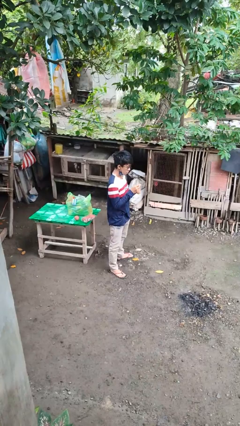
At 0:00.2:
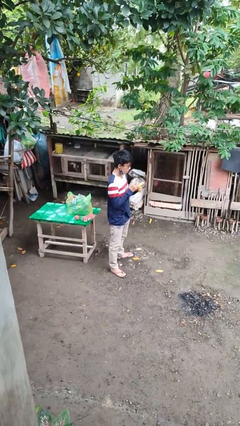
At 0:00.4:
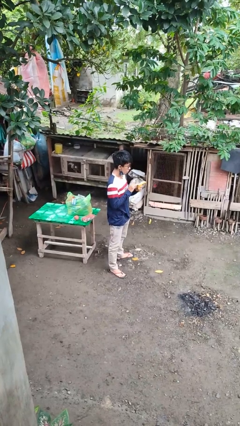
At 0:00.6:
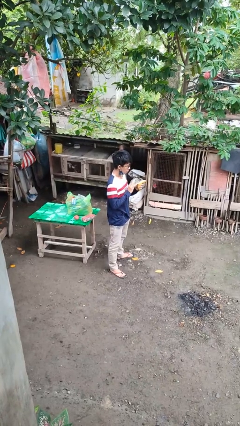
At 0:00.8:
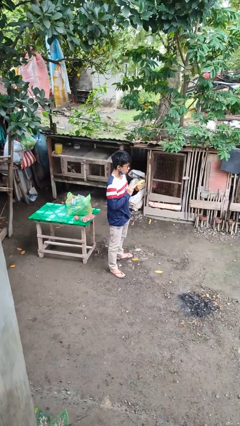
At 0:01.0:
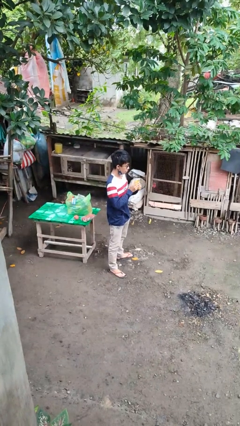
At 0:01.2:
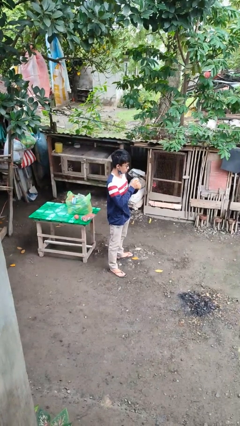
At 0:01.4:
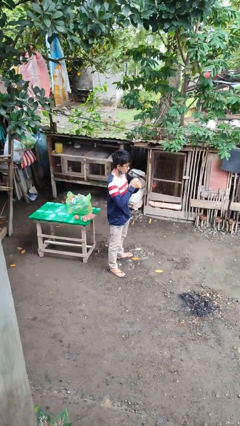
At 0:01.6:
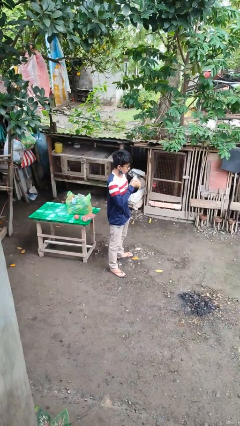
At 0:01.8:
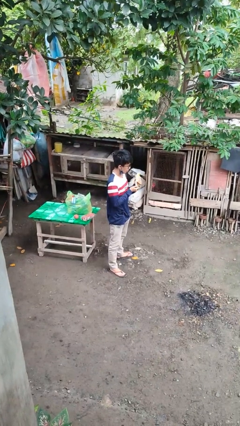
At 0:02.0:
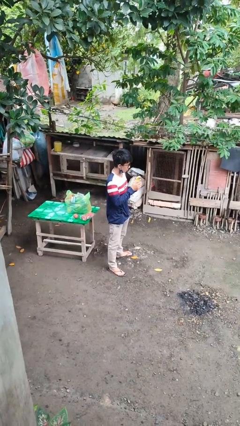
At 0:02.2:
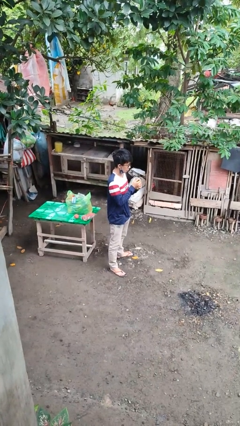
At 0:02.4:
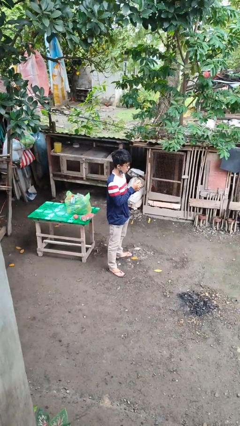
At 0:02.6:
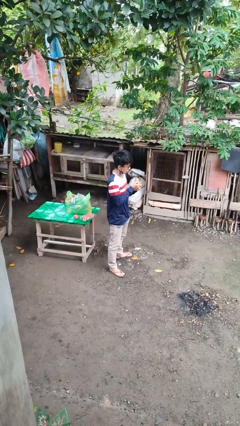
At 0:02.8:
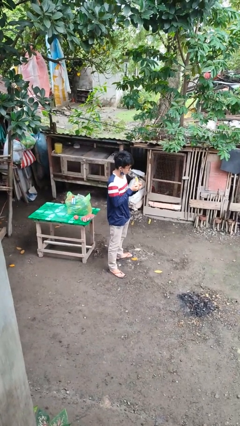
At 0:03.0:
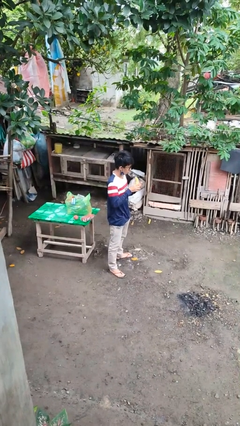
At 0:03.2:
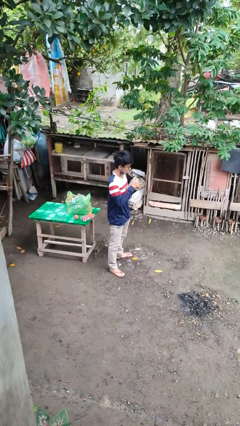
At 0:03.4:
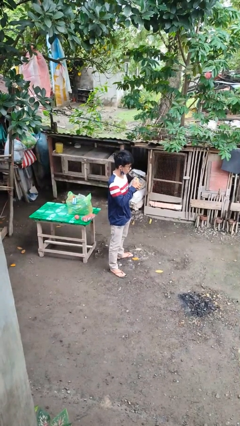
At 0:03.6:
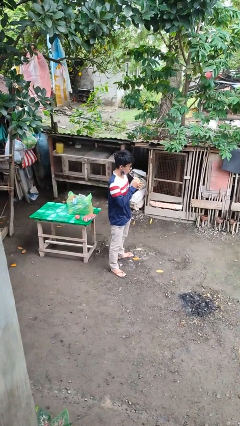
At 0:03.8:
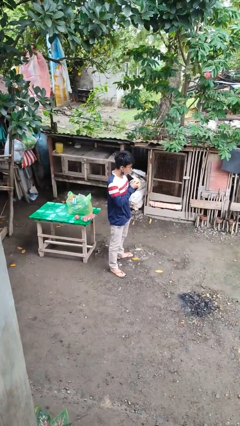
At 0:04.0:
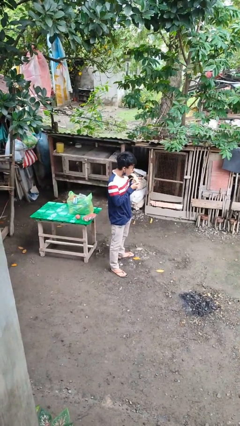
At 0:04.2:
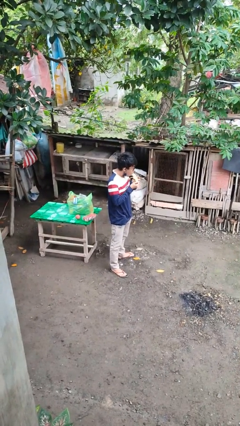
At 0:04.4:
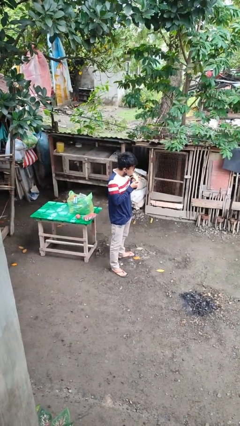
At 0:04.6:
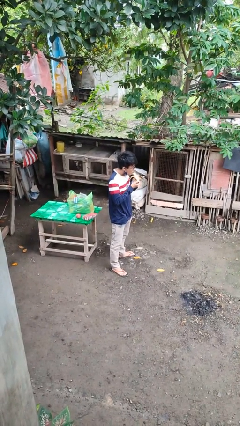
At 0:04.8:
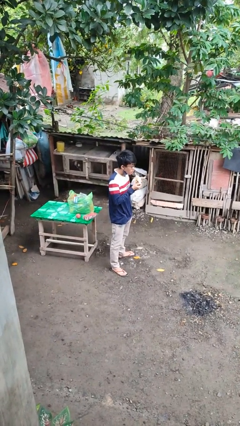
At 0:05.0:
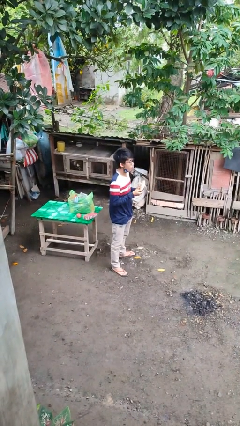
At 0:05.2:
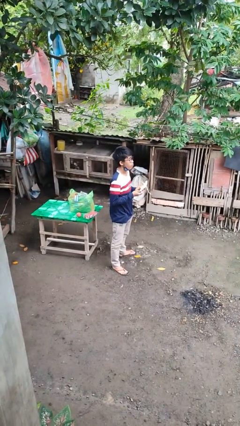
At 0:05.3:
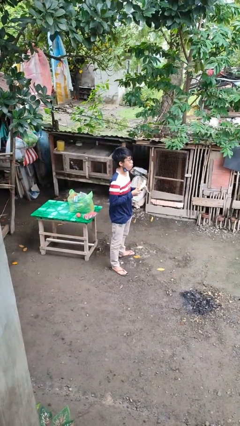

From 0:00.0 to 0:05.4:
person eats banana

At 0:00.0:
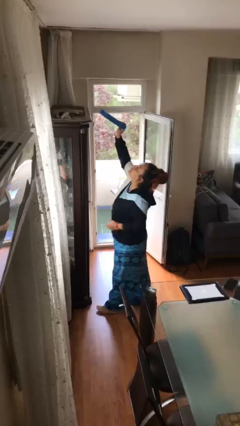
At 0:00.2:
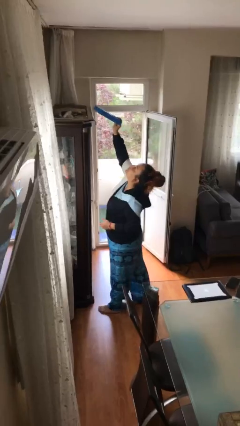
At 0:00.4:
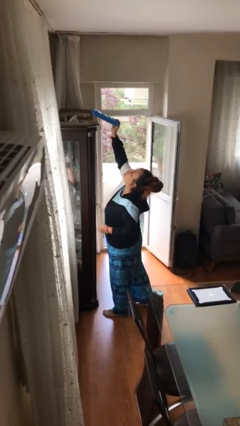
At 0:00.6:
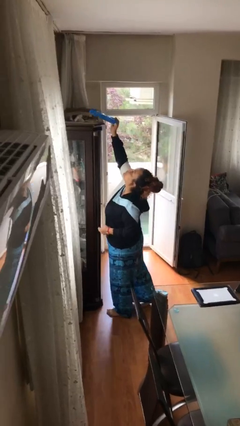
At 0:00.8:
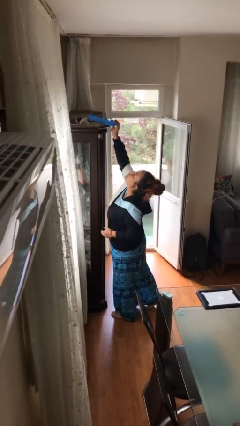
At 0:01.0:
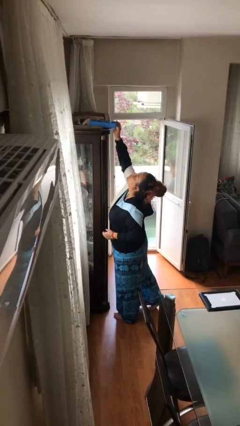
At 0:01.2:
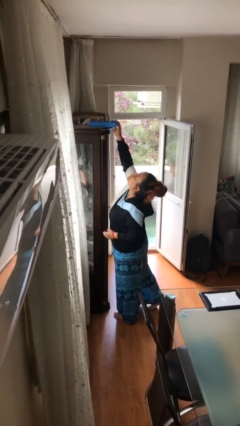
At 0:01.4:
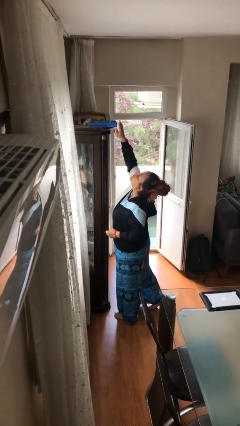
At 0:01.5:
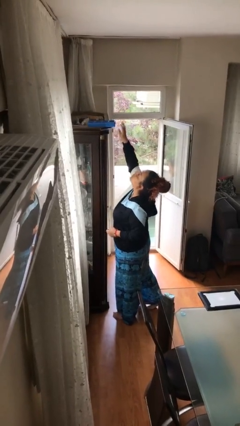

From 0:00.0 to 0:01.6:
person puts down object on shelf

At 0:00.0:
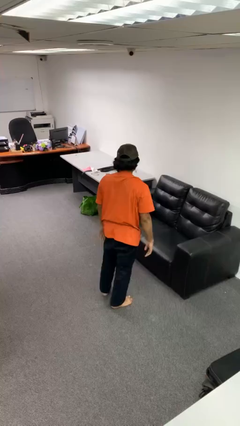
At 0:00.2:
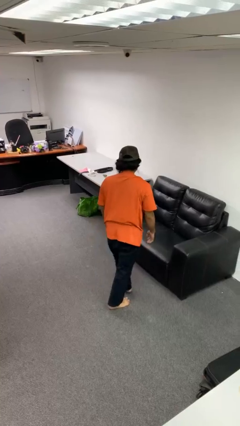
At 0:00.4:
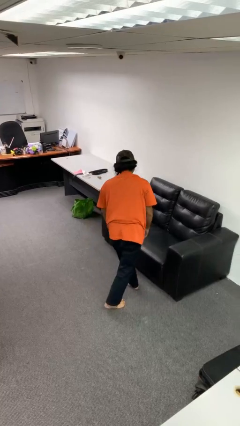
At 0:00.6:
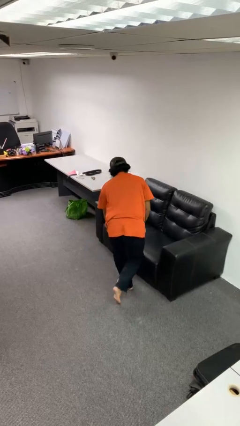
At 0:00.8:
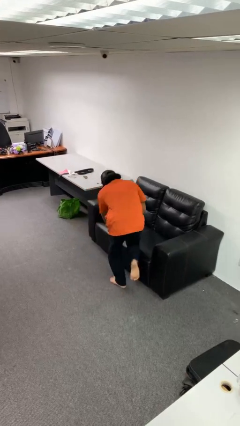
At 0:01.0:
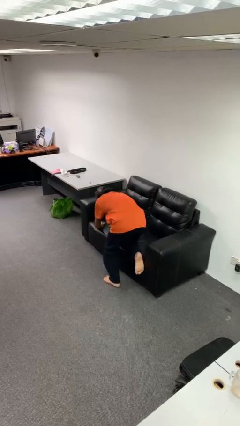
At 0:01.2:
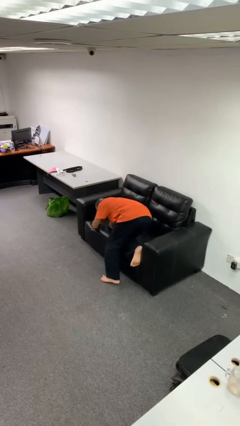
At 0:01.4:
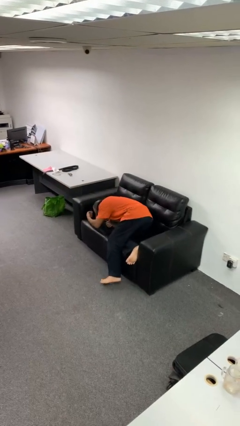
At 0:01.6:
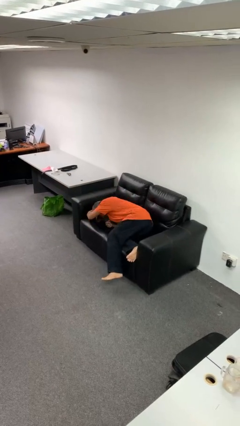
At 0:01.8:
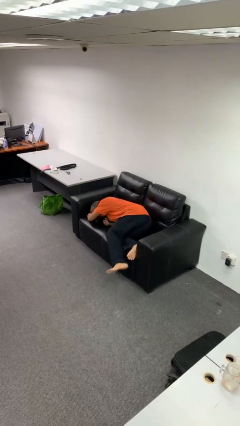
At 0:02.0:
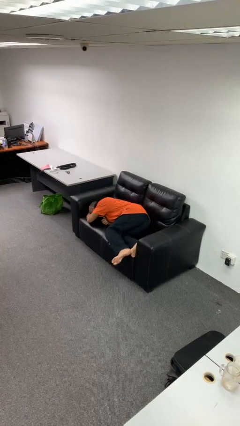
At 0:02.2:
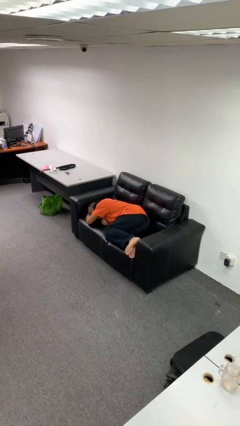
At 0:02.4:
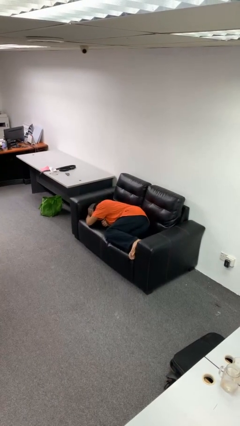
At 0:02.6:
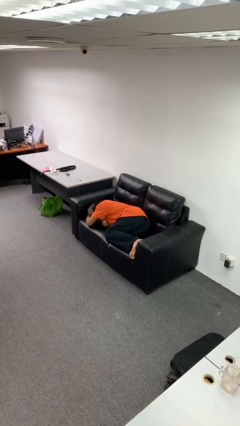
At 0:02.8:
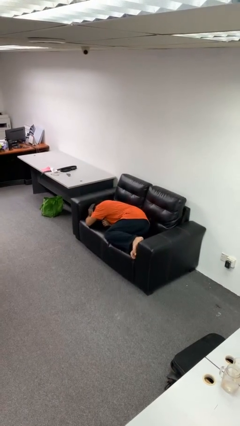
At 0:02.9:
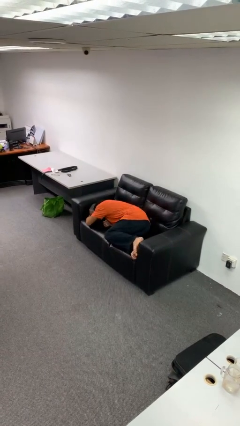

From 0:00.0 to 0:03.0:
person lies down on couch

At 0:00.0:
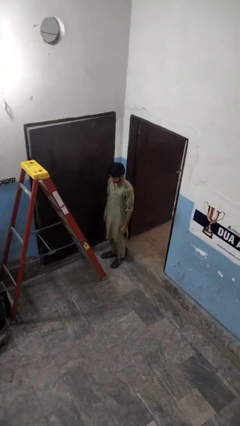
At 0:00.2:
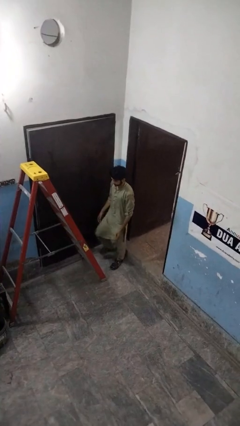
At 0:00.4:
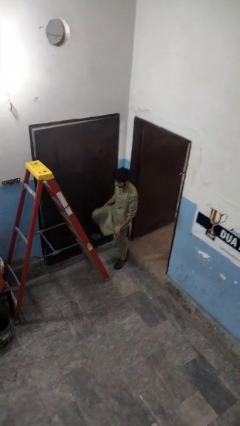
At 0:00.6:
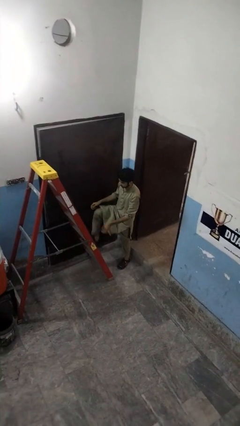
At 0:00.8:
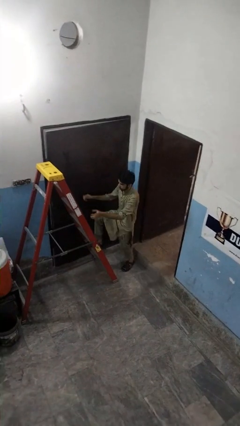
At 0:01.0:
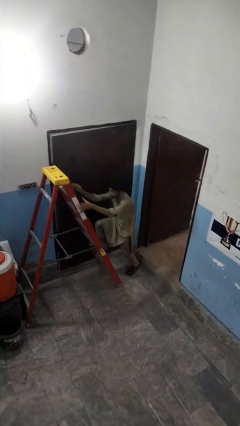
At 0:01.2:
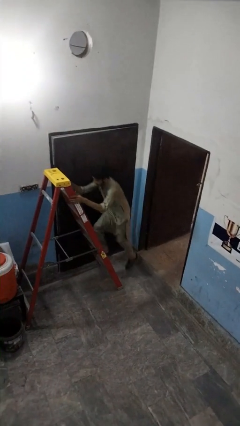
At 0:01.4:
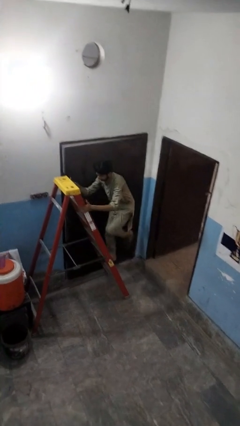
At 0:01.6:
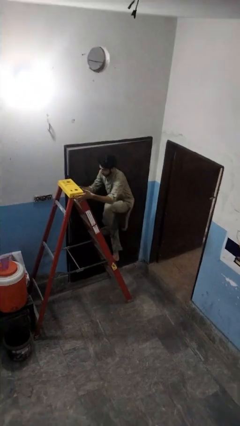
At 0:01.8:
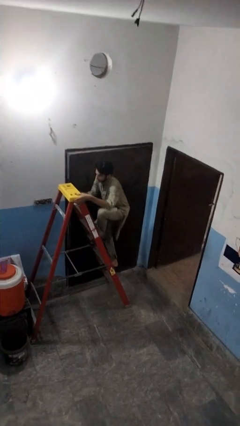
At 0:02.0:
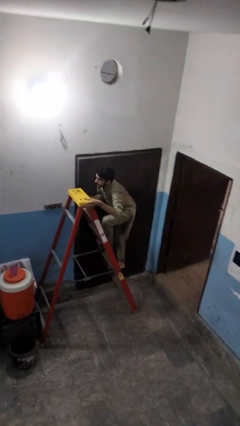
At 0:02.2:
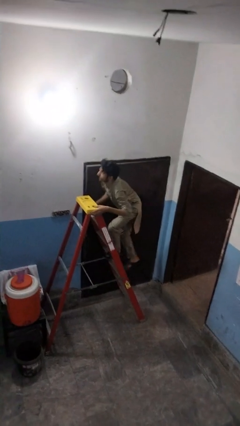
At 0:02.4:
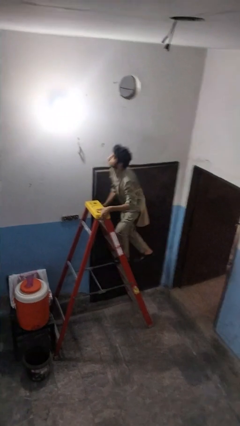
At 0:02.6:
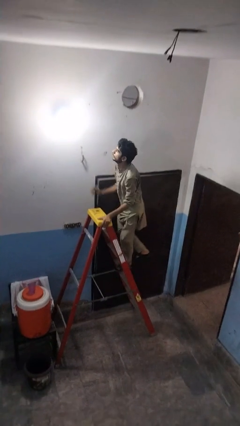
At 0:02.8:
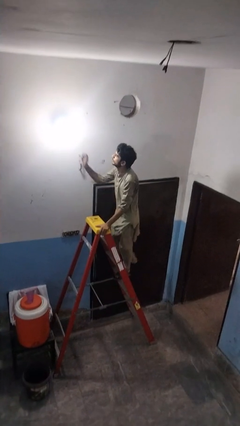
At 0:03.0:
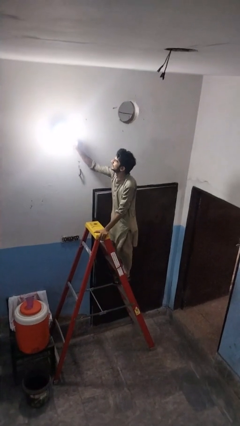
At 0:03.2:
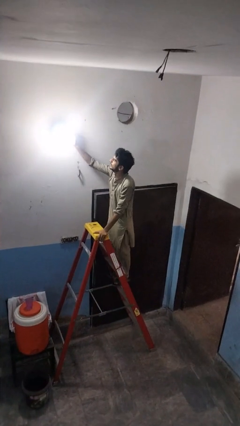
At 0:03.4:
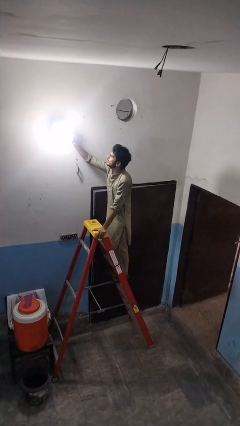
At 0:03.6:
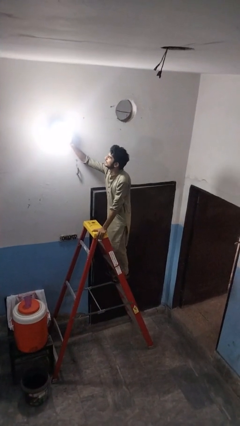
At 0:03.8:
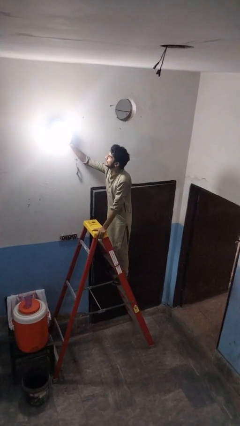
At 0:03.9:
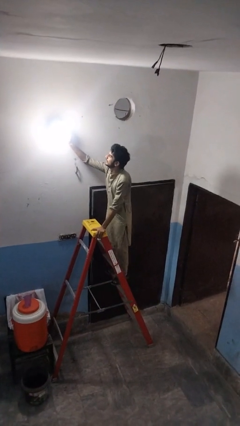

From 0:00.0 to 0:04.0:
person climbs up ladder

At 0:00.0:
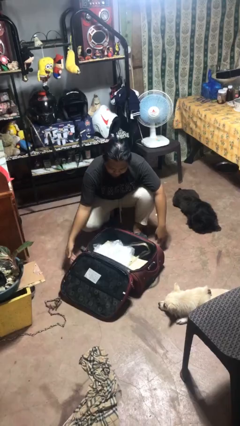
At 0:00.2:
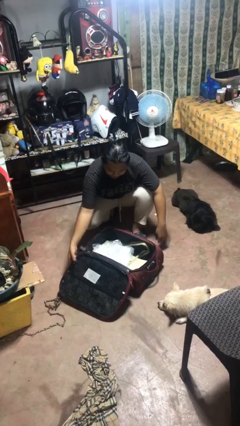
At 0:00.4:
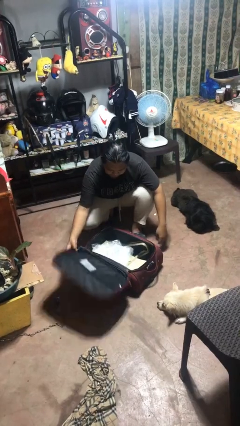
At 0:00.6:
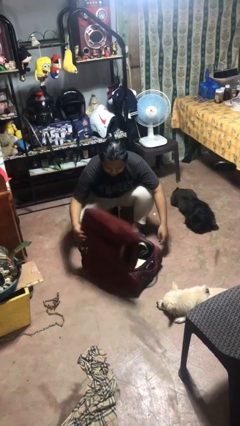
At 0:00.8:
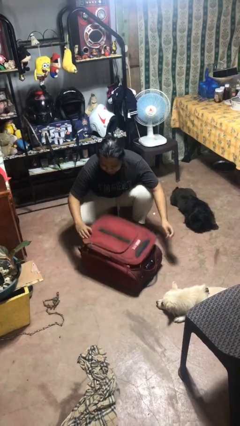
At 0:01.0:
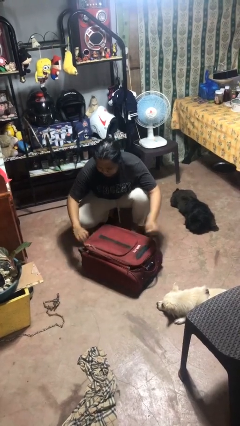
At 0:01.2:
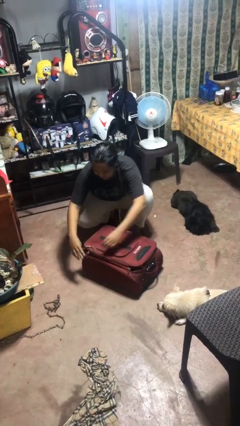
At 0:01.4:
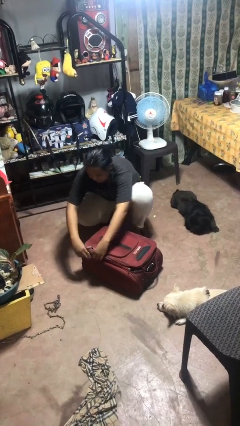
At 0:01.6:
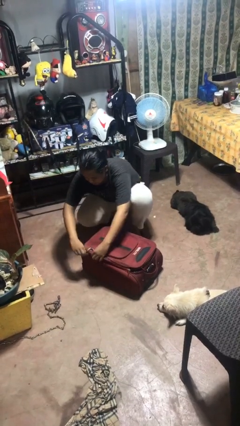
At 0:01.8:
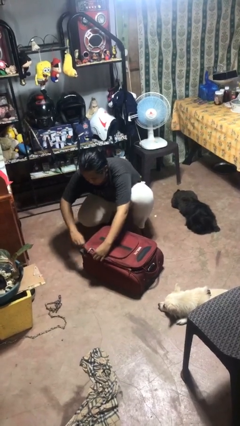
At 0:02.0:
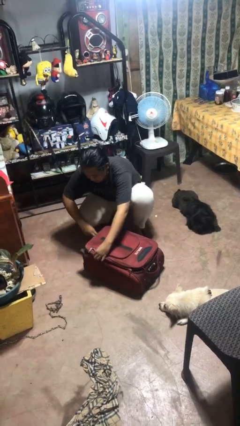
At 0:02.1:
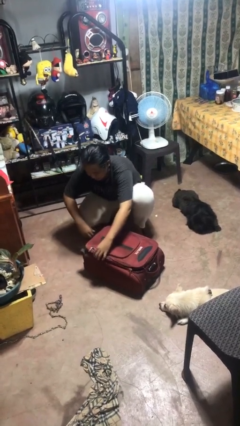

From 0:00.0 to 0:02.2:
person closes suitcase

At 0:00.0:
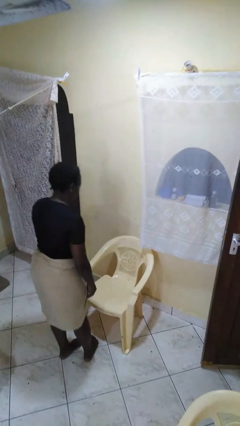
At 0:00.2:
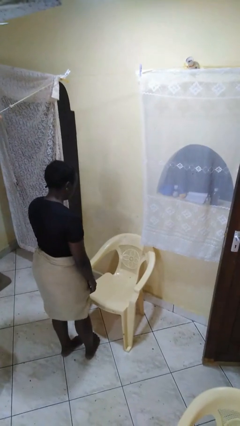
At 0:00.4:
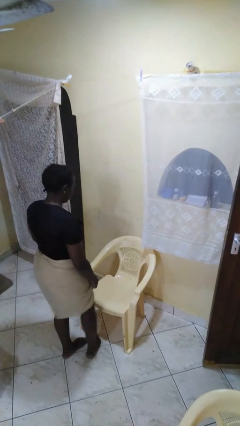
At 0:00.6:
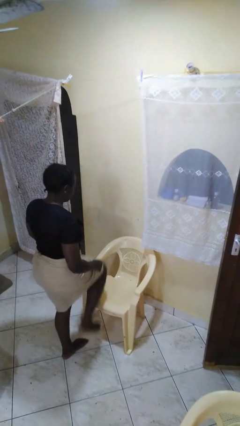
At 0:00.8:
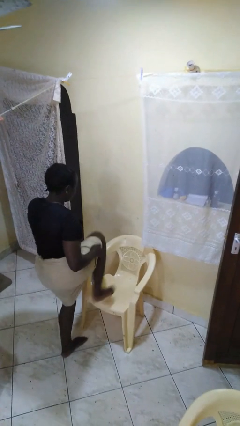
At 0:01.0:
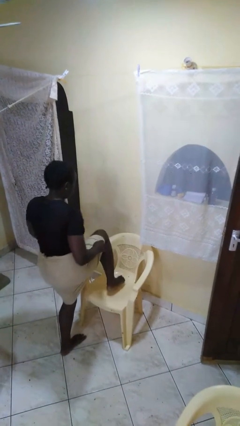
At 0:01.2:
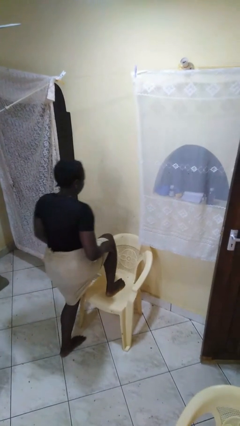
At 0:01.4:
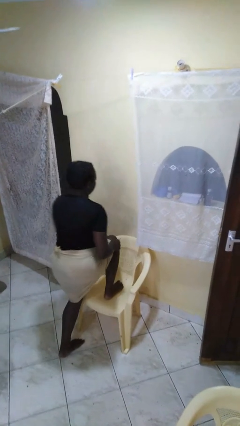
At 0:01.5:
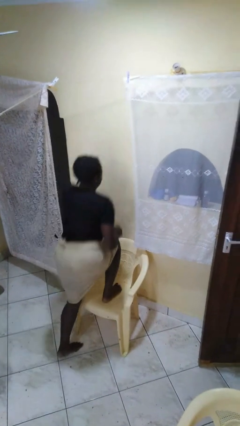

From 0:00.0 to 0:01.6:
person climbs on chair
